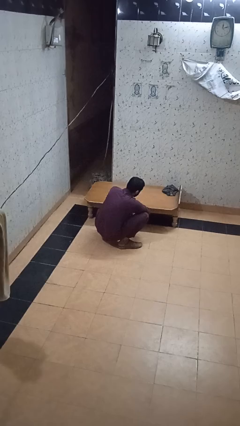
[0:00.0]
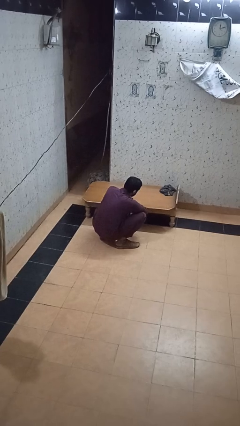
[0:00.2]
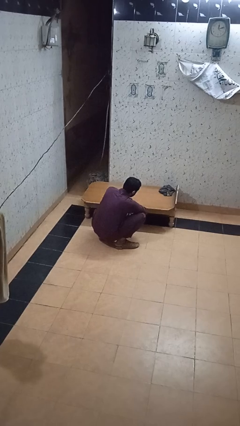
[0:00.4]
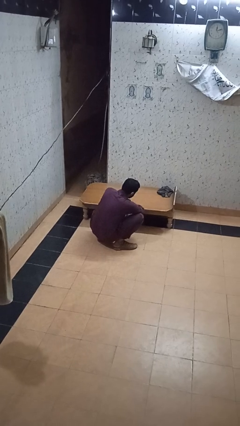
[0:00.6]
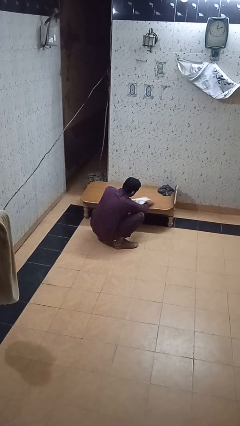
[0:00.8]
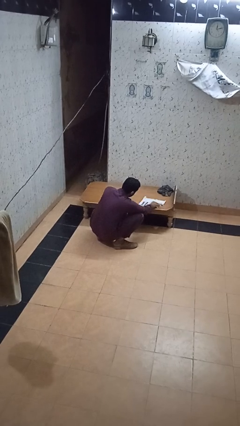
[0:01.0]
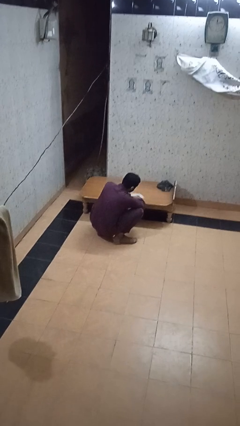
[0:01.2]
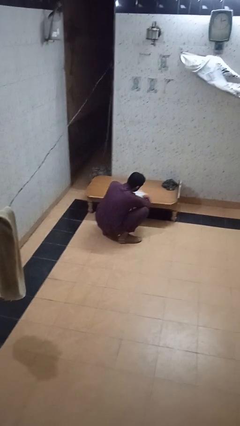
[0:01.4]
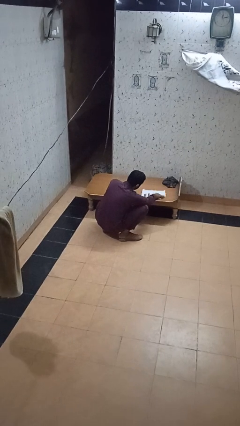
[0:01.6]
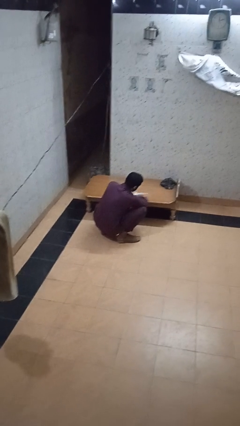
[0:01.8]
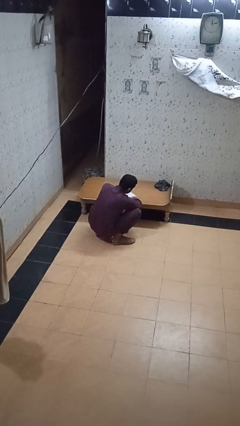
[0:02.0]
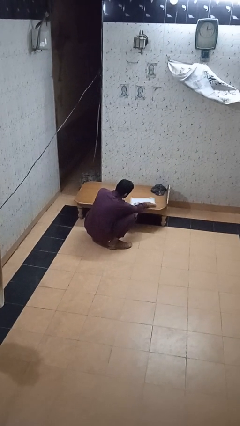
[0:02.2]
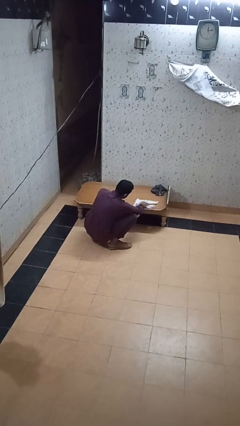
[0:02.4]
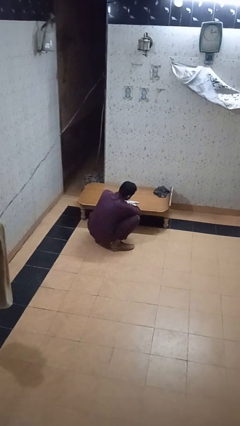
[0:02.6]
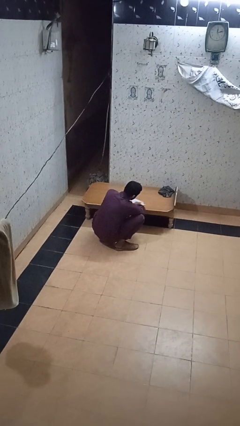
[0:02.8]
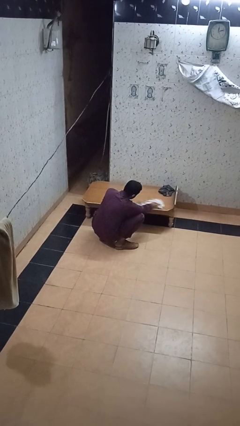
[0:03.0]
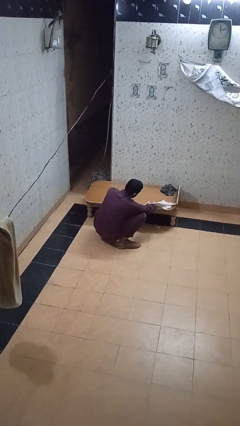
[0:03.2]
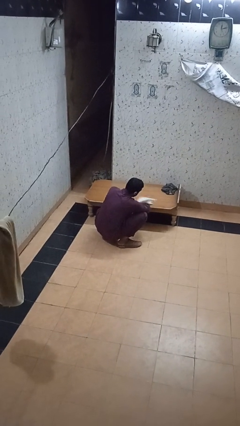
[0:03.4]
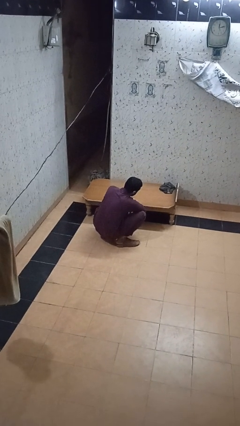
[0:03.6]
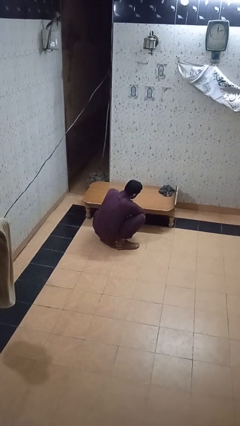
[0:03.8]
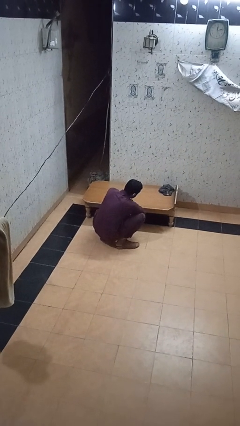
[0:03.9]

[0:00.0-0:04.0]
person vacuums carpet

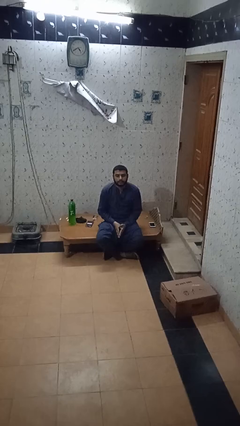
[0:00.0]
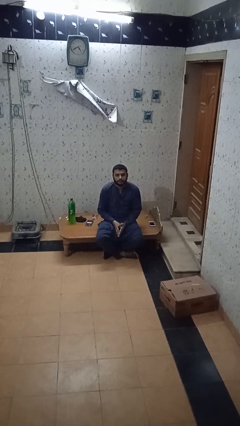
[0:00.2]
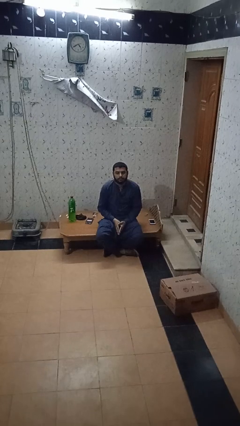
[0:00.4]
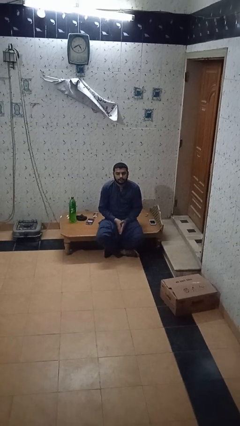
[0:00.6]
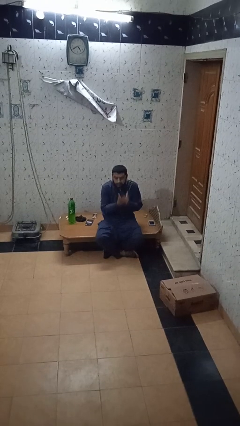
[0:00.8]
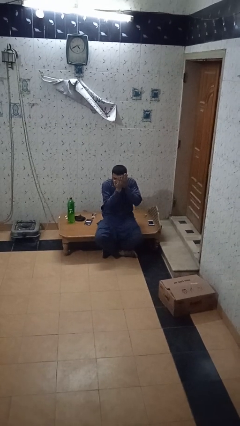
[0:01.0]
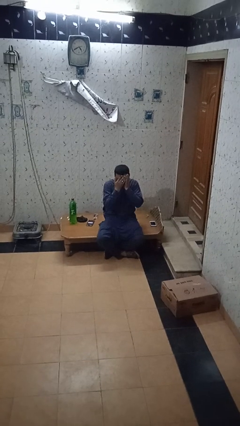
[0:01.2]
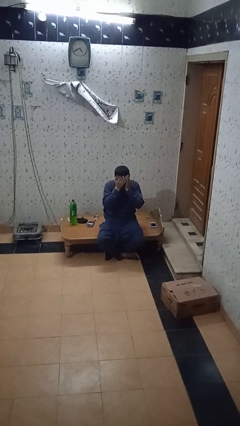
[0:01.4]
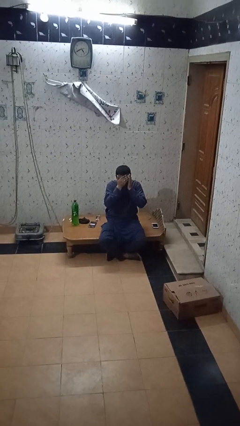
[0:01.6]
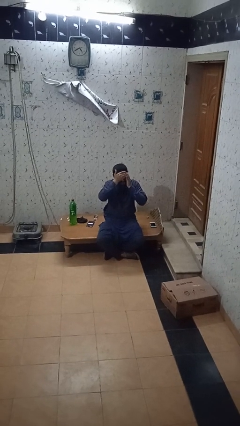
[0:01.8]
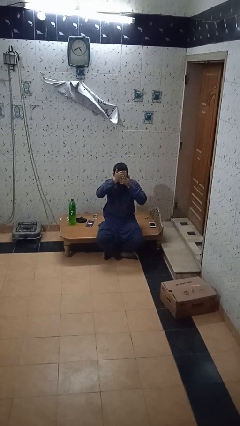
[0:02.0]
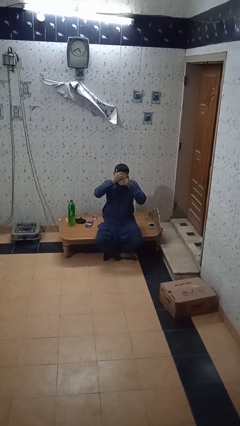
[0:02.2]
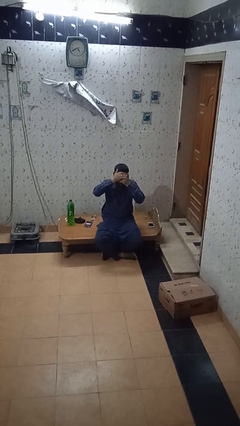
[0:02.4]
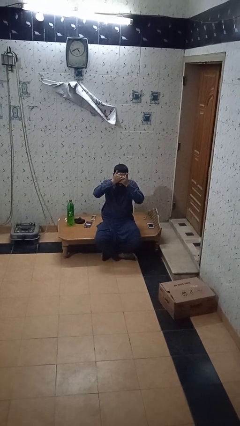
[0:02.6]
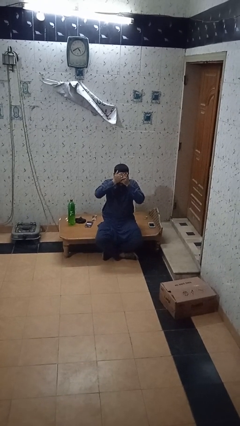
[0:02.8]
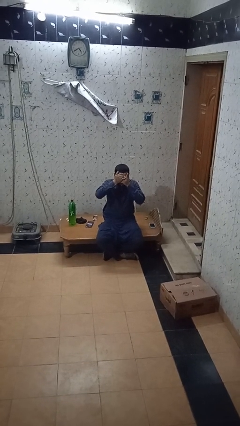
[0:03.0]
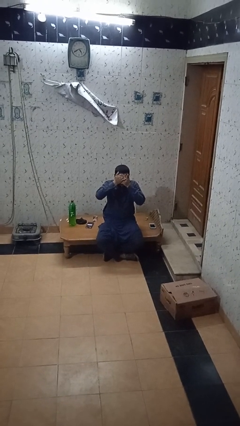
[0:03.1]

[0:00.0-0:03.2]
person covers face with hands

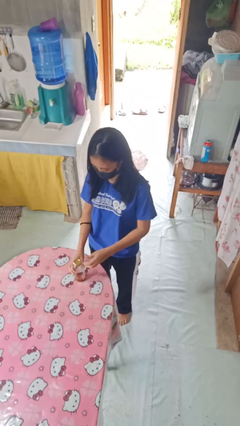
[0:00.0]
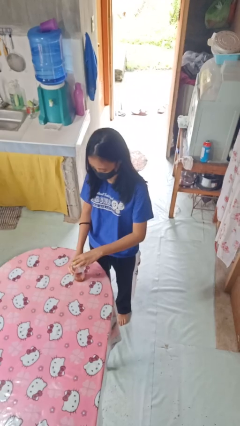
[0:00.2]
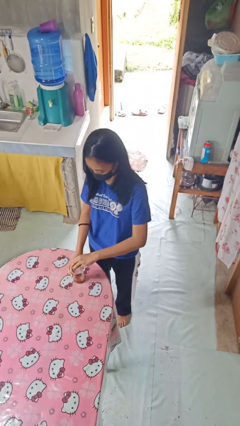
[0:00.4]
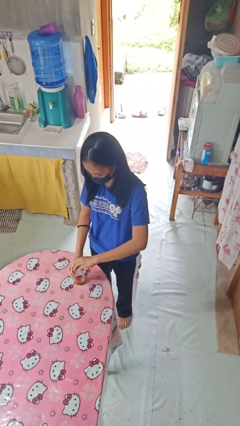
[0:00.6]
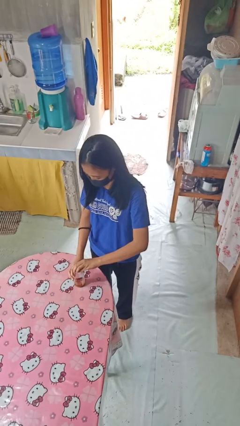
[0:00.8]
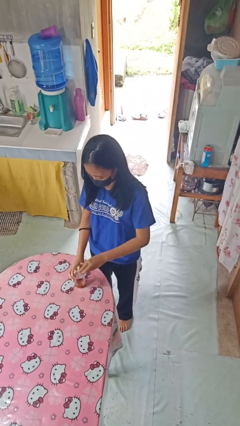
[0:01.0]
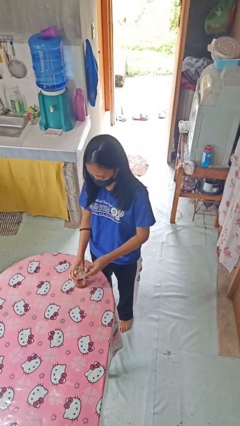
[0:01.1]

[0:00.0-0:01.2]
person opens jar

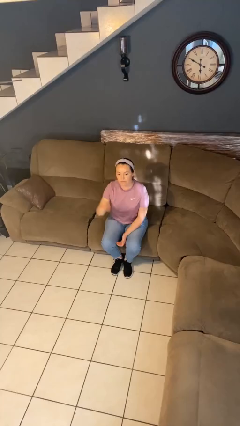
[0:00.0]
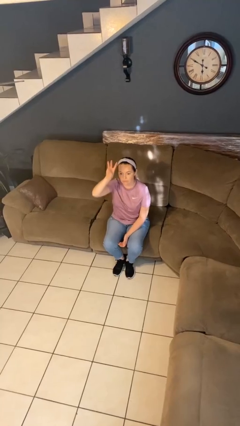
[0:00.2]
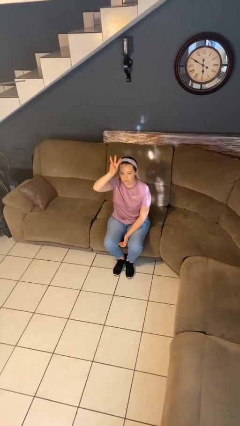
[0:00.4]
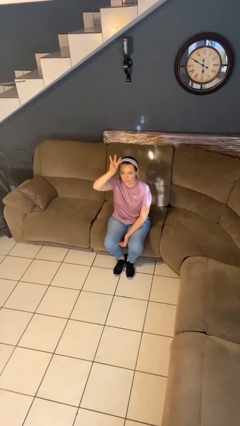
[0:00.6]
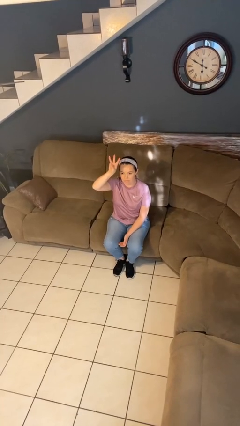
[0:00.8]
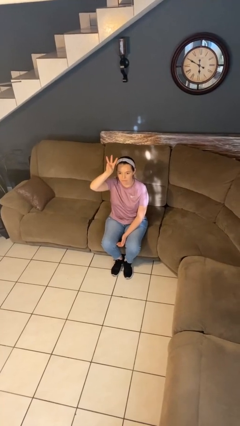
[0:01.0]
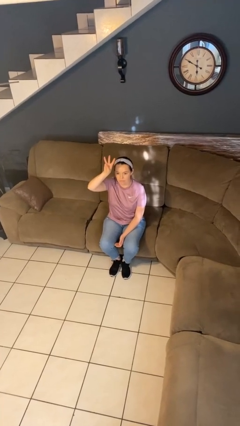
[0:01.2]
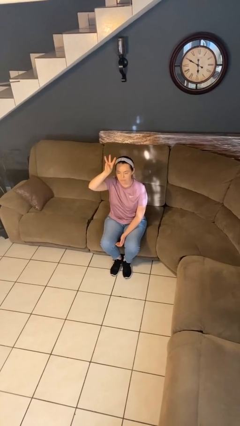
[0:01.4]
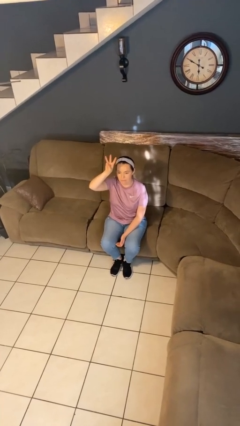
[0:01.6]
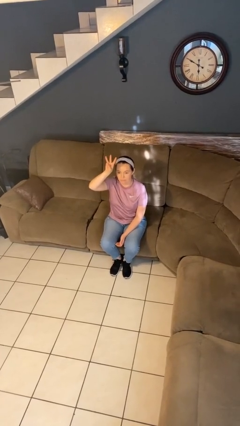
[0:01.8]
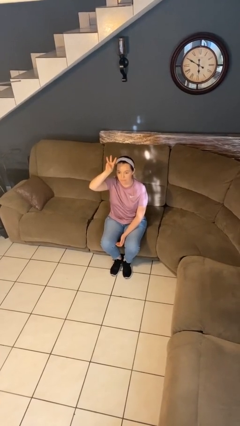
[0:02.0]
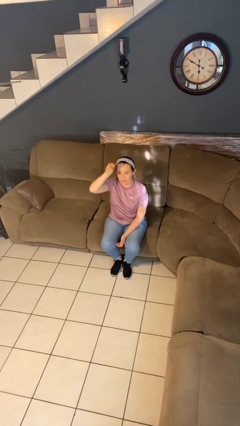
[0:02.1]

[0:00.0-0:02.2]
person gestures number three

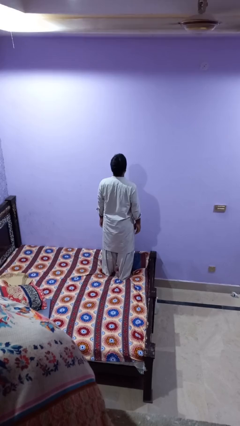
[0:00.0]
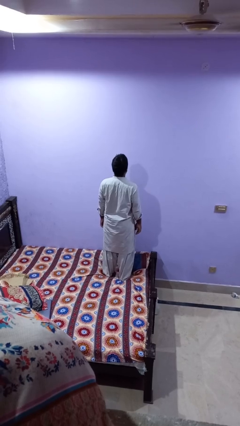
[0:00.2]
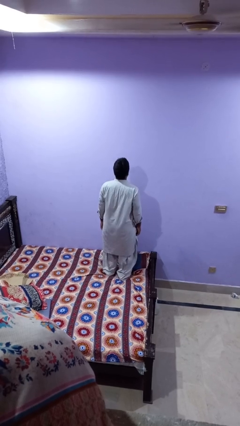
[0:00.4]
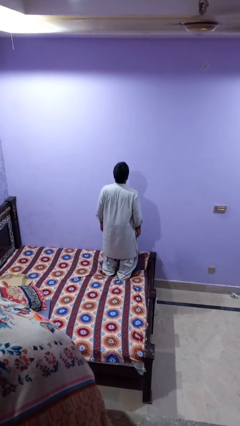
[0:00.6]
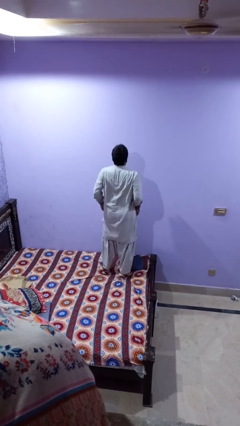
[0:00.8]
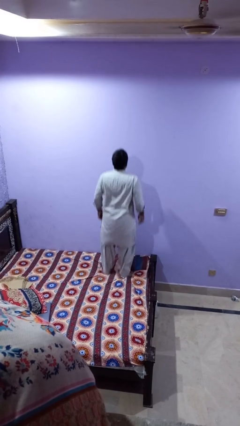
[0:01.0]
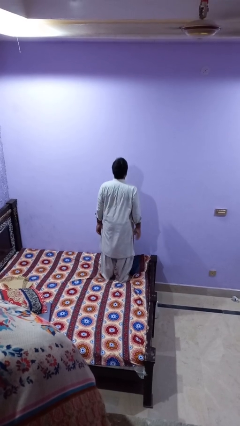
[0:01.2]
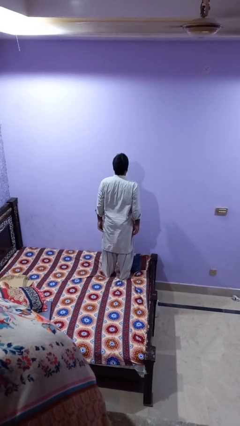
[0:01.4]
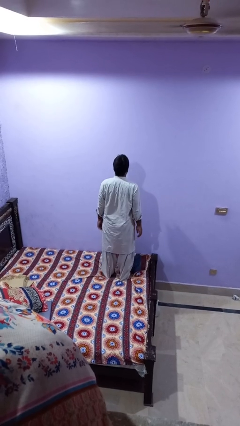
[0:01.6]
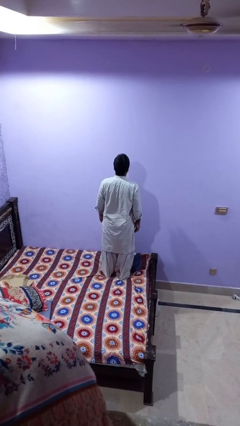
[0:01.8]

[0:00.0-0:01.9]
person jumps on bed

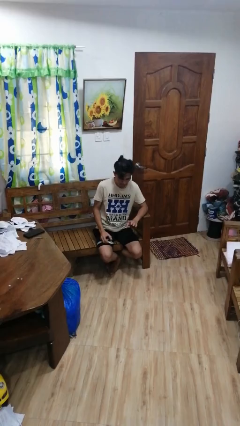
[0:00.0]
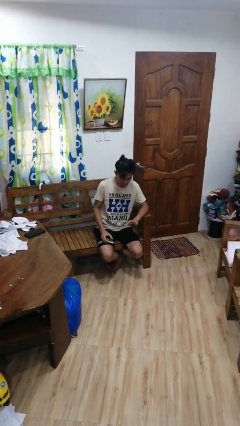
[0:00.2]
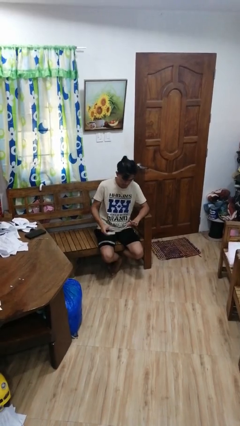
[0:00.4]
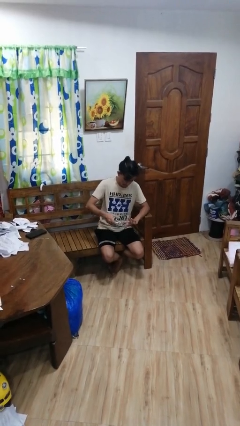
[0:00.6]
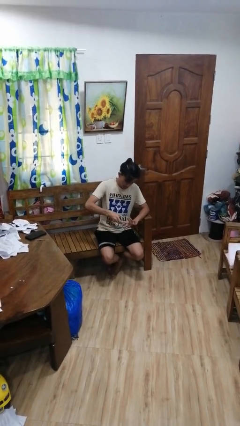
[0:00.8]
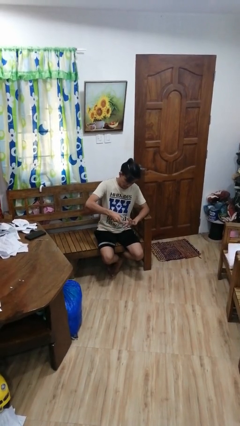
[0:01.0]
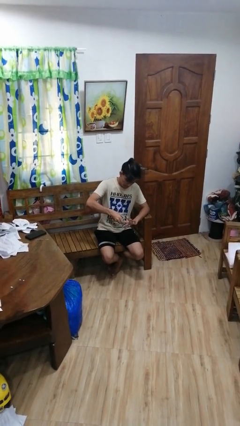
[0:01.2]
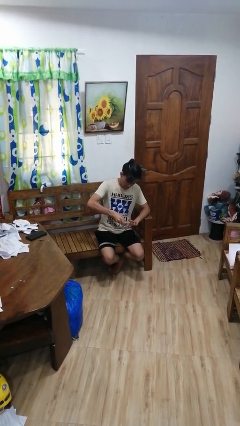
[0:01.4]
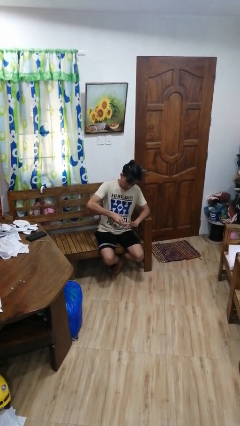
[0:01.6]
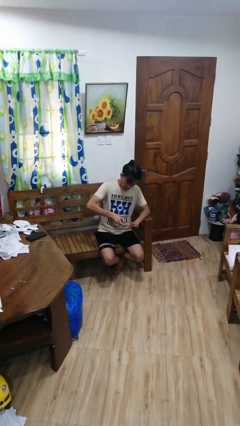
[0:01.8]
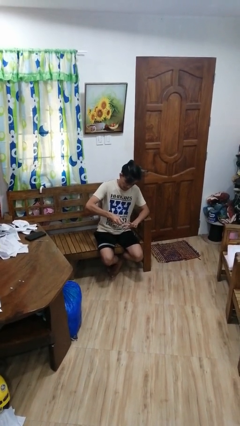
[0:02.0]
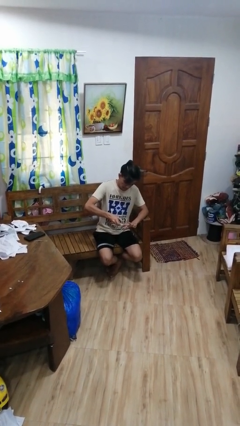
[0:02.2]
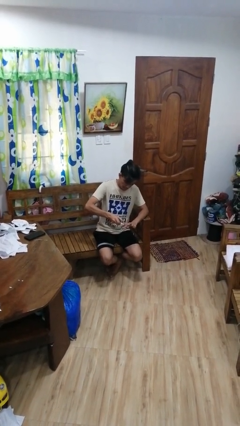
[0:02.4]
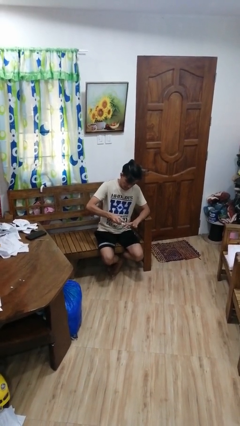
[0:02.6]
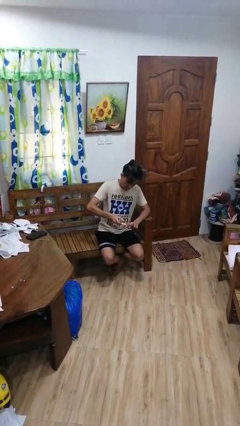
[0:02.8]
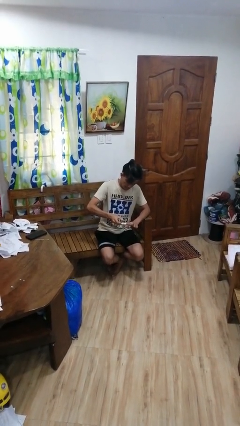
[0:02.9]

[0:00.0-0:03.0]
person clips fingernails

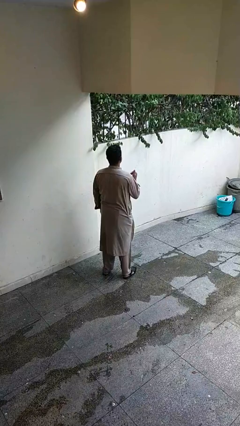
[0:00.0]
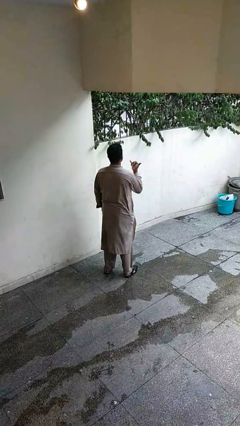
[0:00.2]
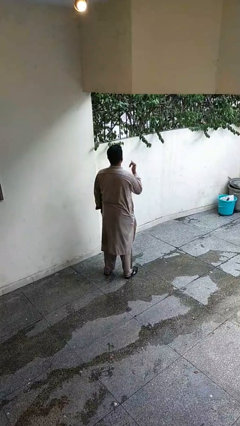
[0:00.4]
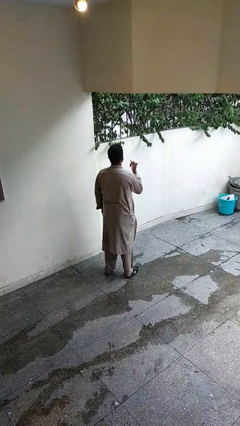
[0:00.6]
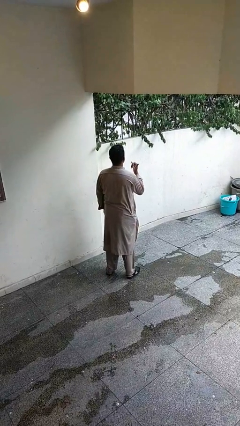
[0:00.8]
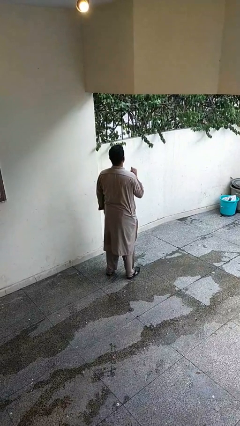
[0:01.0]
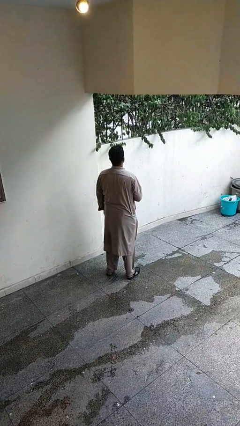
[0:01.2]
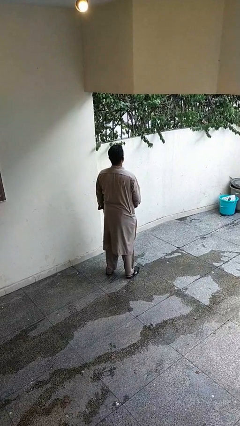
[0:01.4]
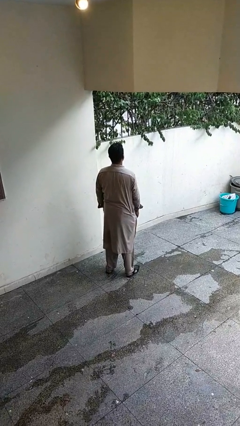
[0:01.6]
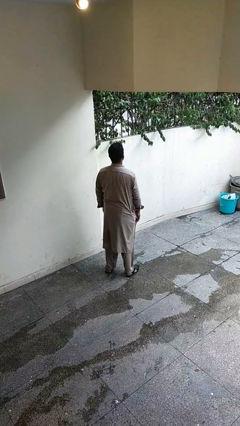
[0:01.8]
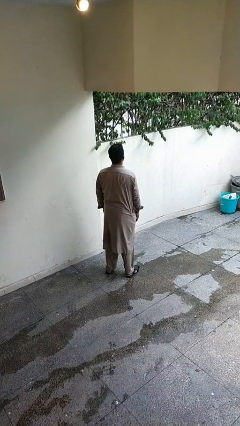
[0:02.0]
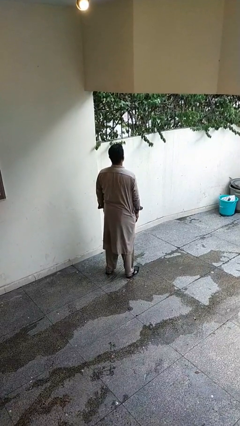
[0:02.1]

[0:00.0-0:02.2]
person gestures hang loose
